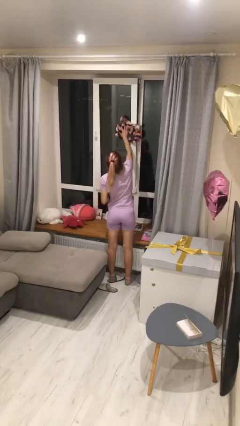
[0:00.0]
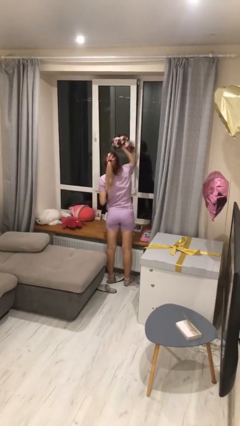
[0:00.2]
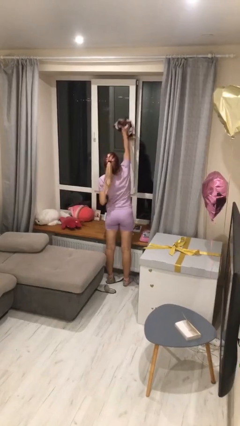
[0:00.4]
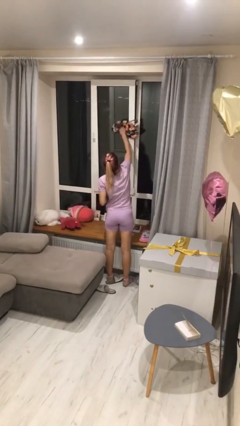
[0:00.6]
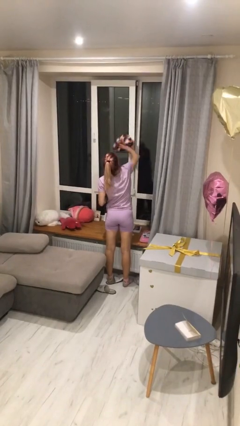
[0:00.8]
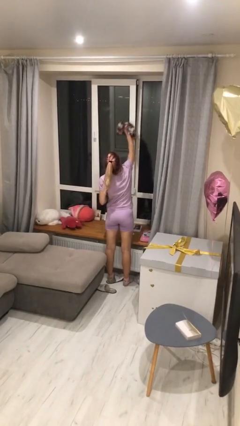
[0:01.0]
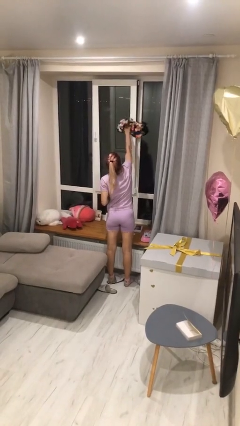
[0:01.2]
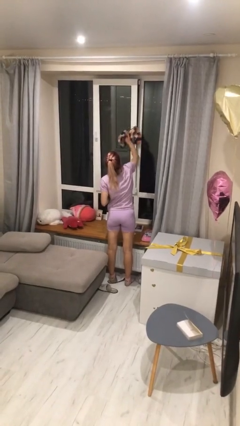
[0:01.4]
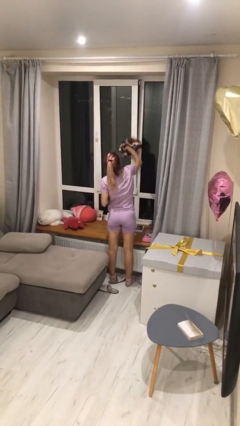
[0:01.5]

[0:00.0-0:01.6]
person washes window

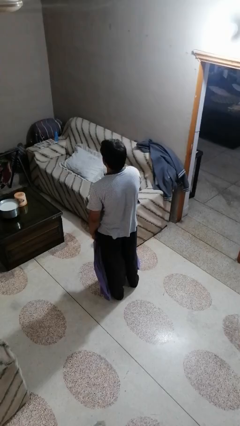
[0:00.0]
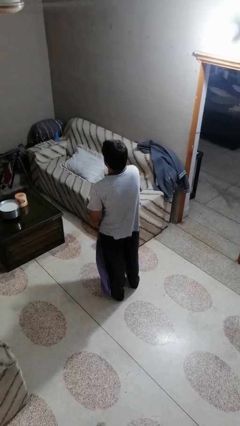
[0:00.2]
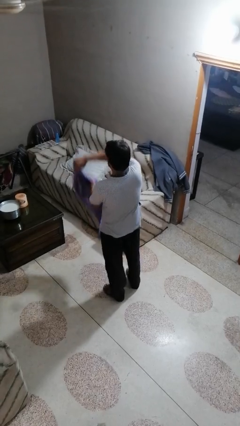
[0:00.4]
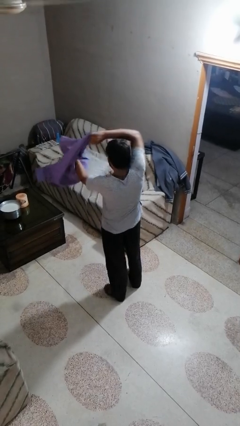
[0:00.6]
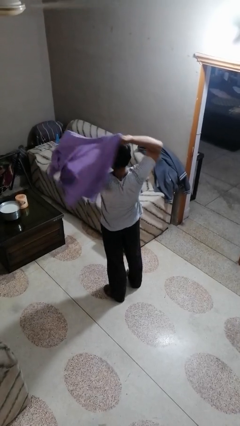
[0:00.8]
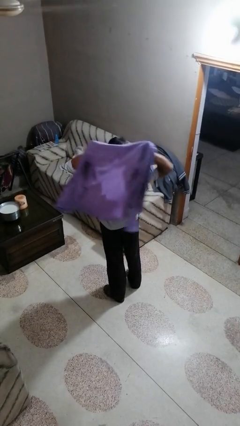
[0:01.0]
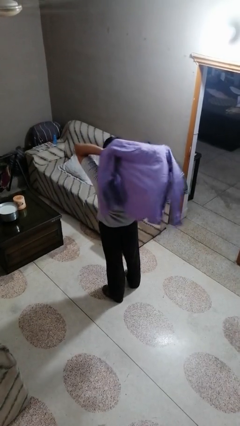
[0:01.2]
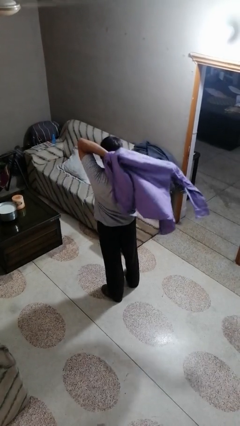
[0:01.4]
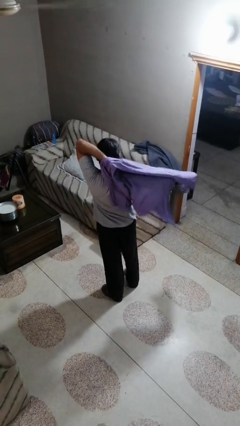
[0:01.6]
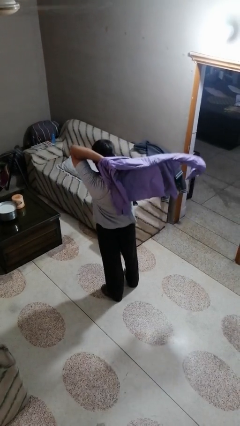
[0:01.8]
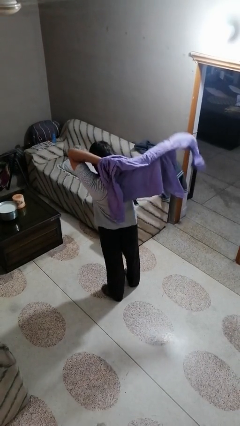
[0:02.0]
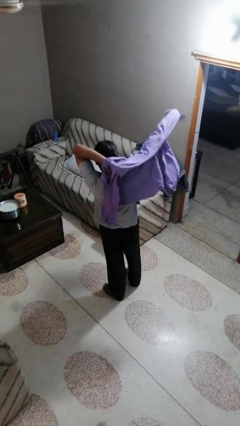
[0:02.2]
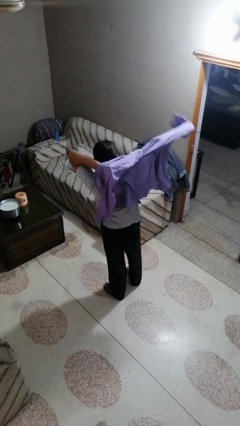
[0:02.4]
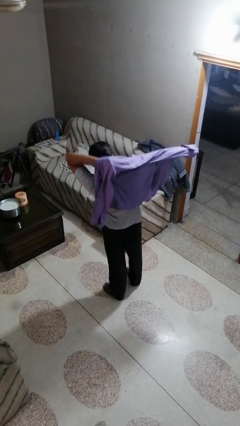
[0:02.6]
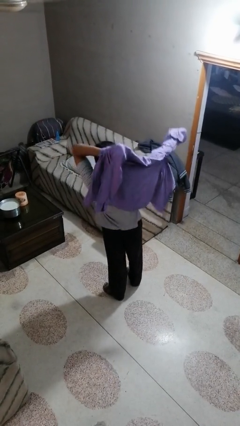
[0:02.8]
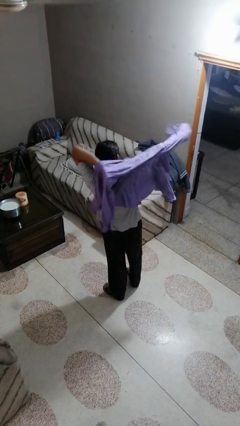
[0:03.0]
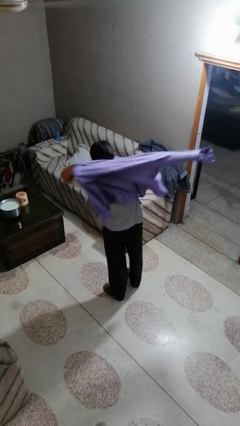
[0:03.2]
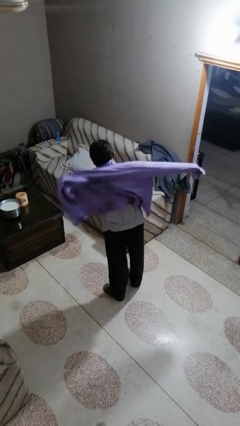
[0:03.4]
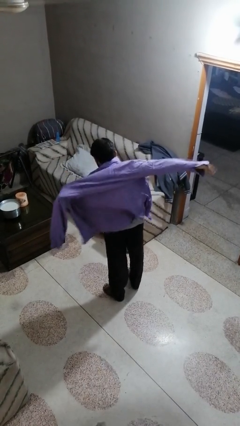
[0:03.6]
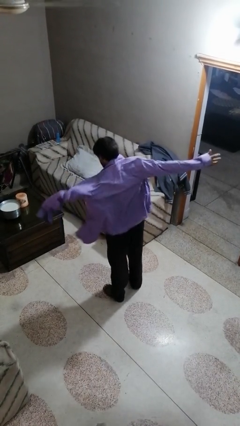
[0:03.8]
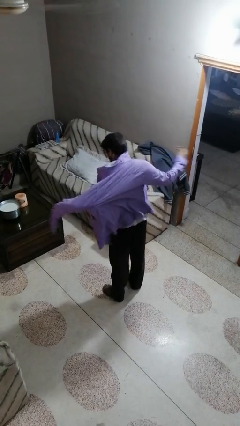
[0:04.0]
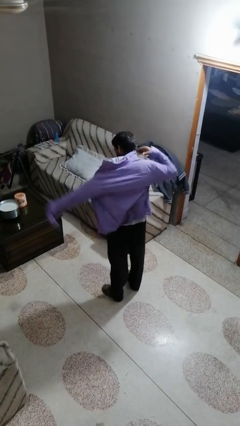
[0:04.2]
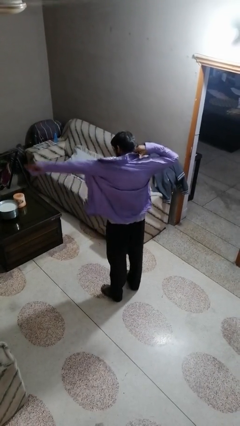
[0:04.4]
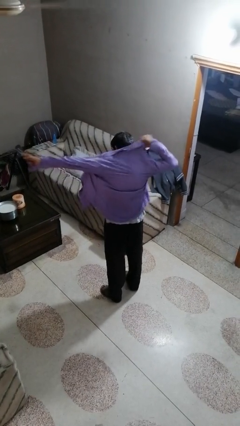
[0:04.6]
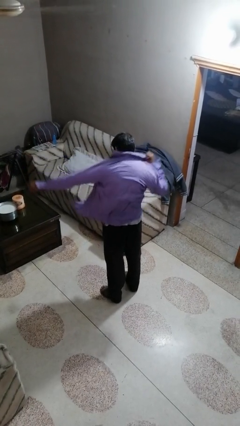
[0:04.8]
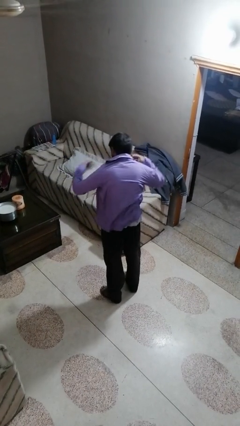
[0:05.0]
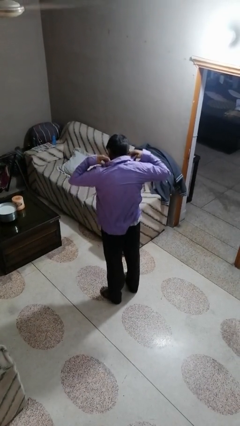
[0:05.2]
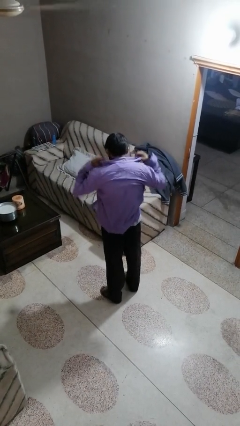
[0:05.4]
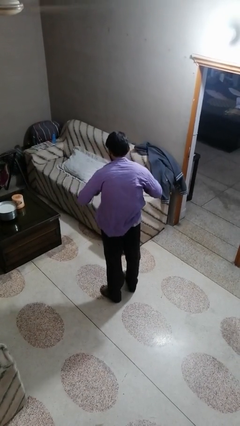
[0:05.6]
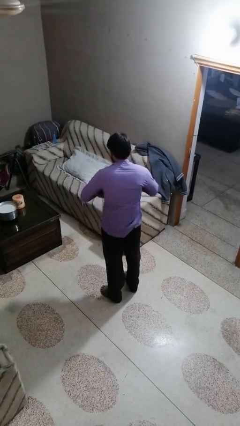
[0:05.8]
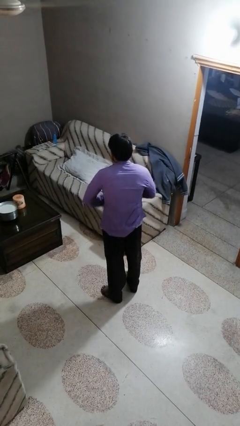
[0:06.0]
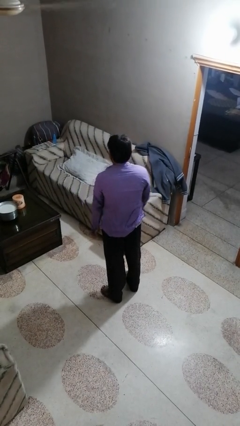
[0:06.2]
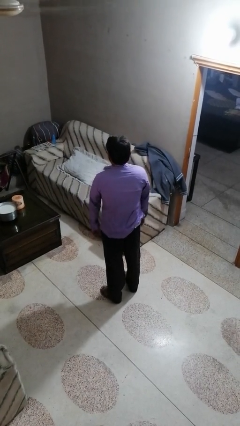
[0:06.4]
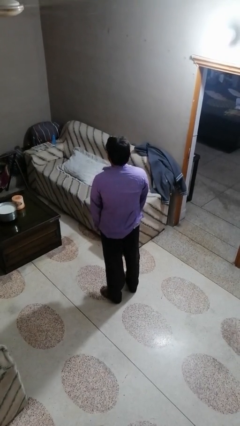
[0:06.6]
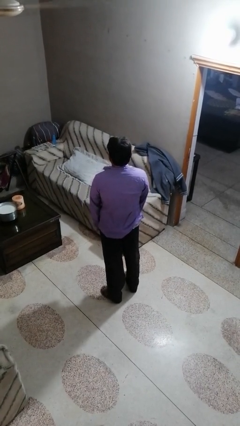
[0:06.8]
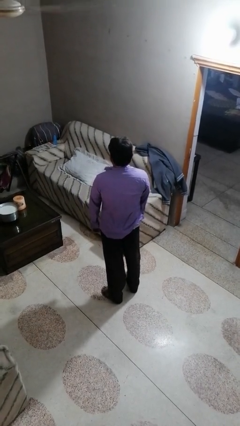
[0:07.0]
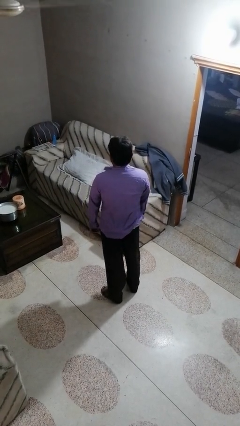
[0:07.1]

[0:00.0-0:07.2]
person puts on shirt

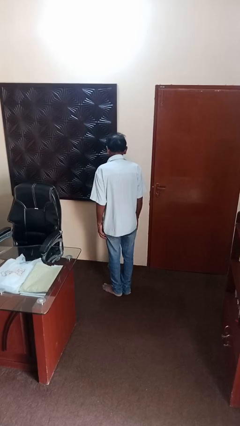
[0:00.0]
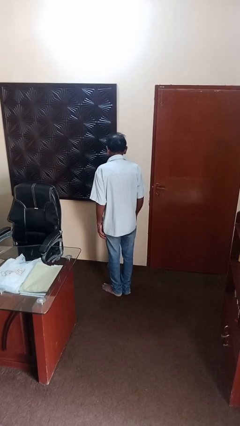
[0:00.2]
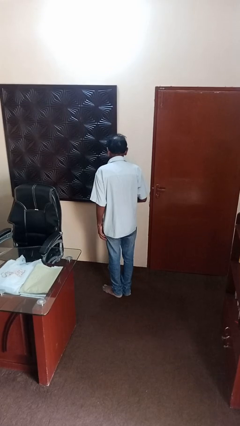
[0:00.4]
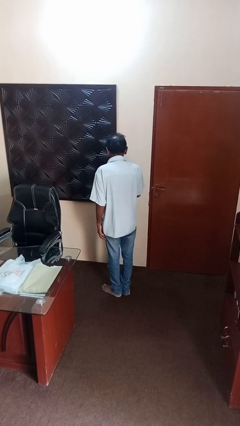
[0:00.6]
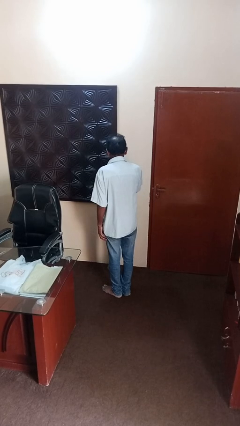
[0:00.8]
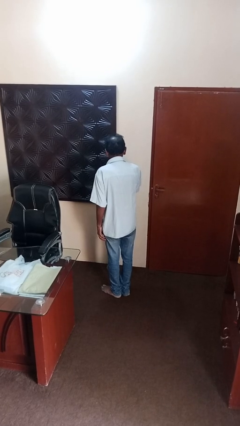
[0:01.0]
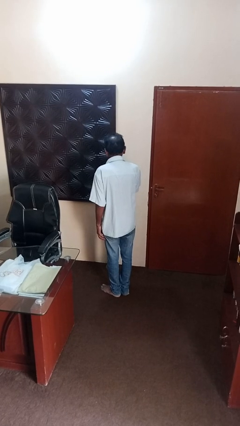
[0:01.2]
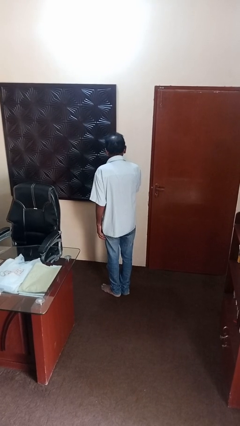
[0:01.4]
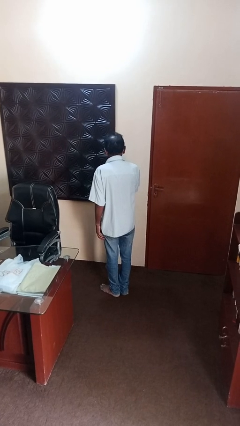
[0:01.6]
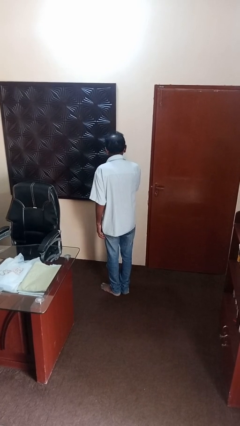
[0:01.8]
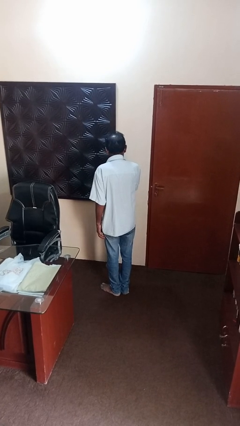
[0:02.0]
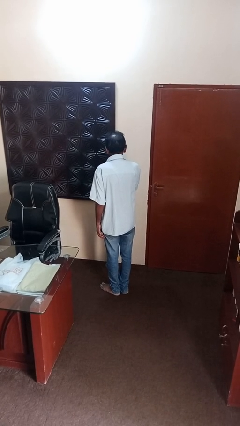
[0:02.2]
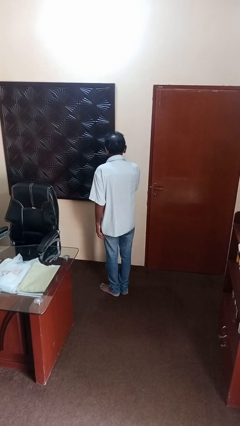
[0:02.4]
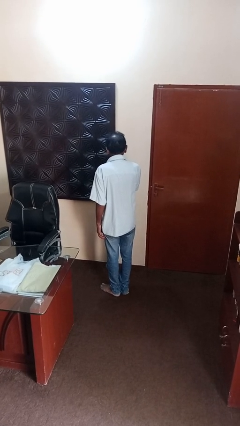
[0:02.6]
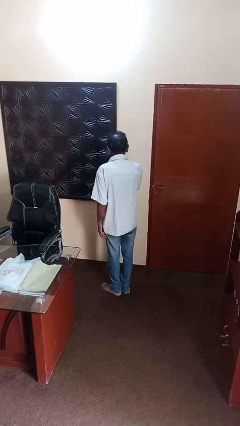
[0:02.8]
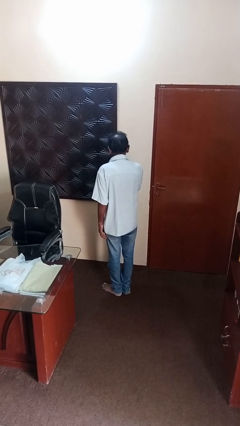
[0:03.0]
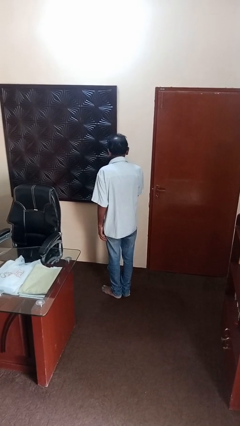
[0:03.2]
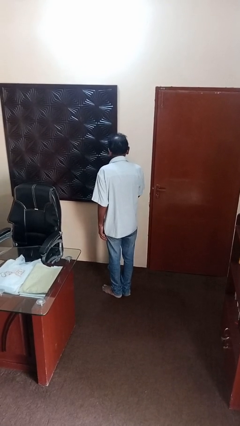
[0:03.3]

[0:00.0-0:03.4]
person licks fingers

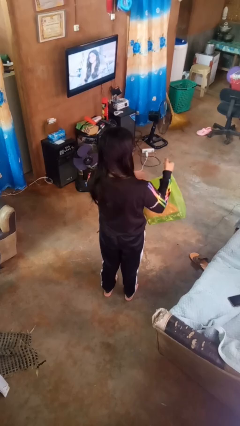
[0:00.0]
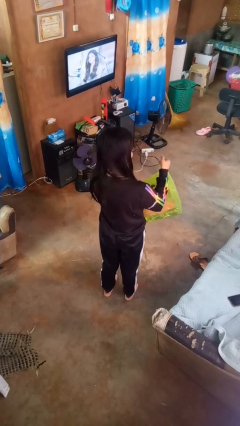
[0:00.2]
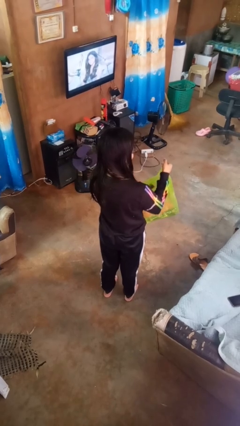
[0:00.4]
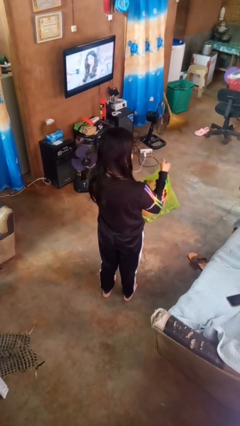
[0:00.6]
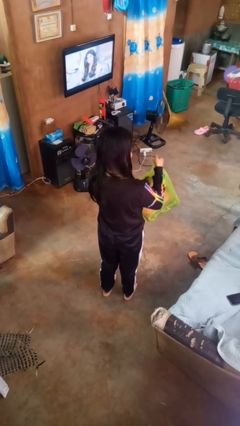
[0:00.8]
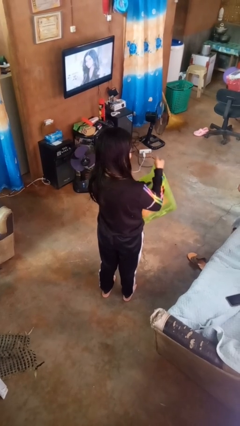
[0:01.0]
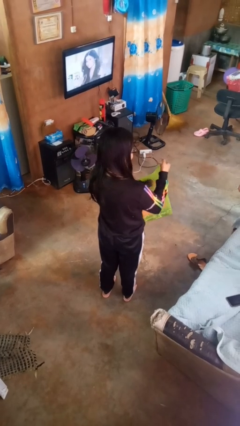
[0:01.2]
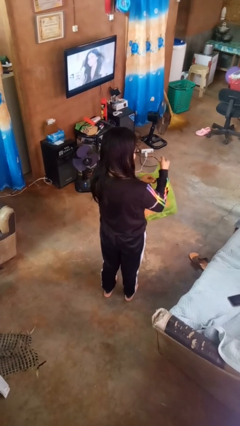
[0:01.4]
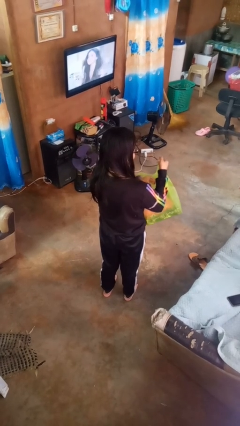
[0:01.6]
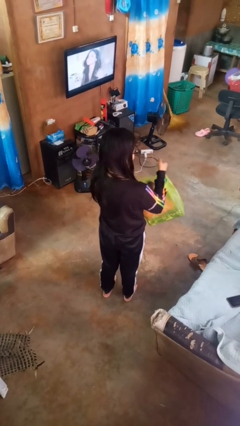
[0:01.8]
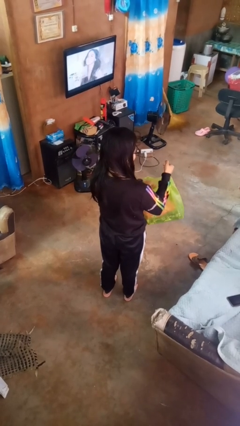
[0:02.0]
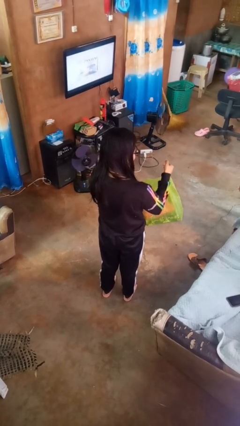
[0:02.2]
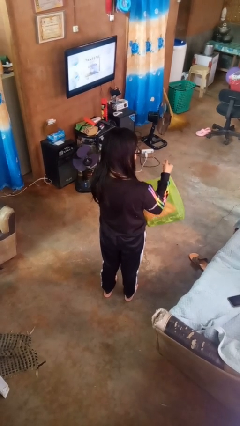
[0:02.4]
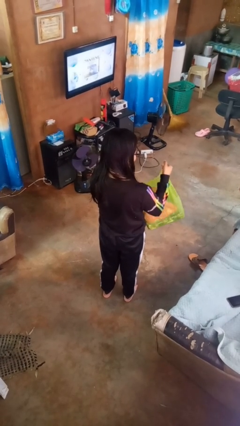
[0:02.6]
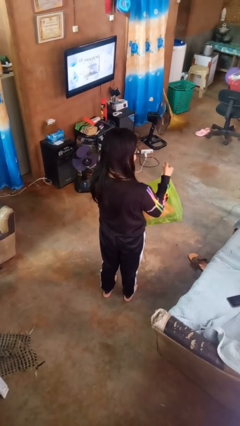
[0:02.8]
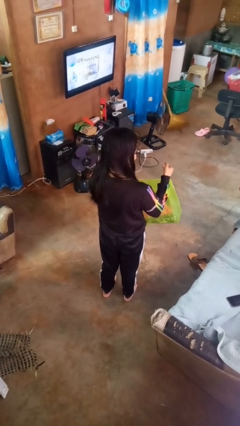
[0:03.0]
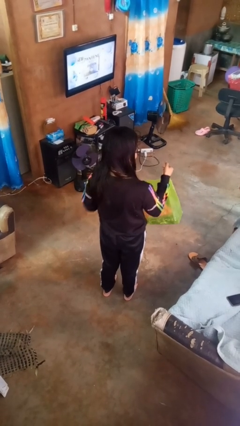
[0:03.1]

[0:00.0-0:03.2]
person searches in bag

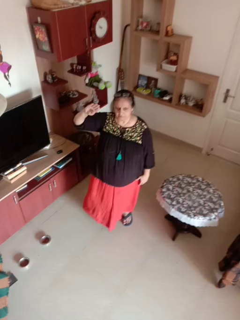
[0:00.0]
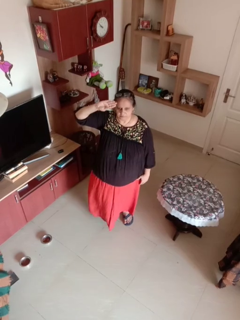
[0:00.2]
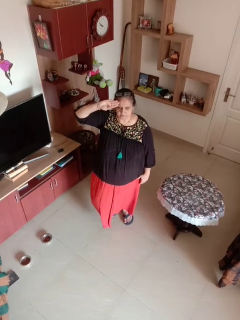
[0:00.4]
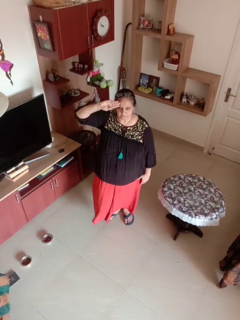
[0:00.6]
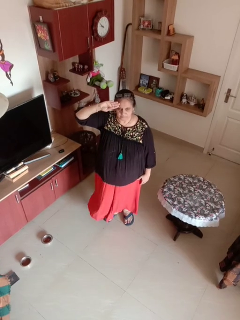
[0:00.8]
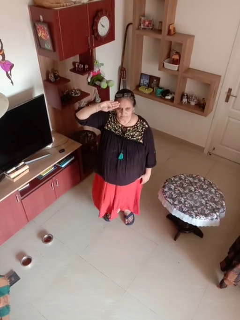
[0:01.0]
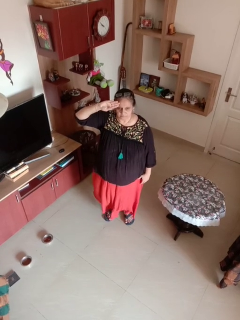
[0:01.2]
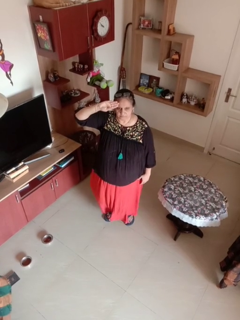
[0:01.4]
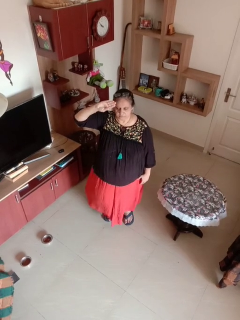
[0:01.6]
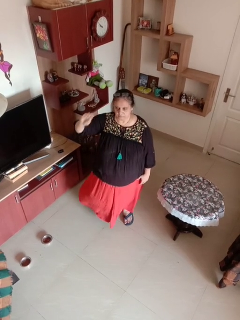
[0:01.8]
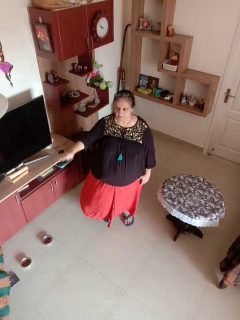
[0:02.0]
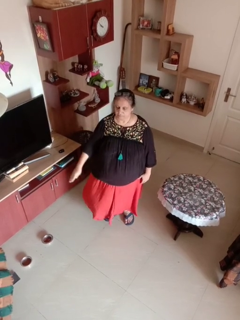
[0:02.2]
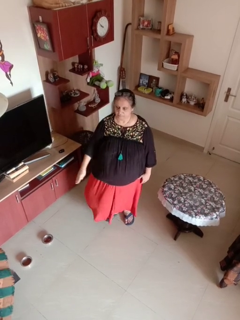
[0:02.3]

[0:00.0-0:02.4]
person salutes

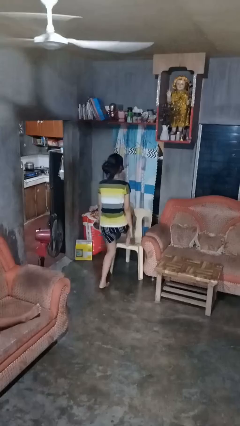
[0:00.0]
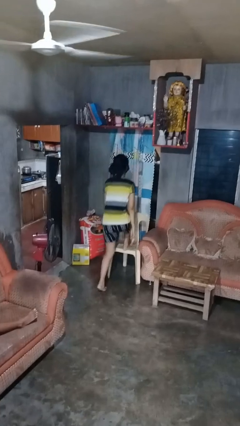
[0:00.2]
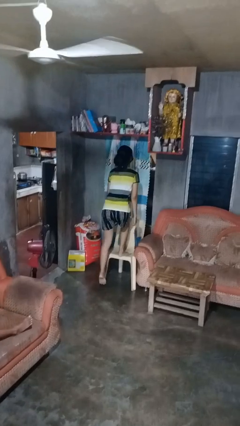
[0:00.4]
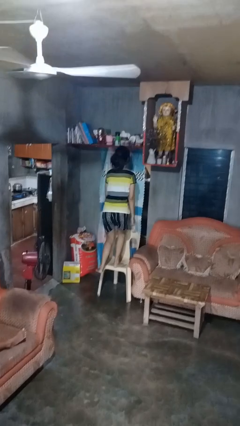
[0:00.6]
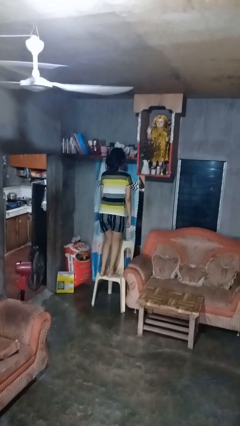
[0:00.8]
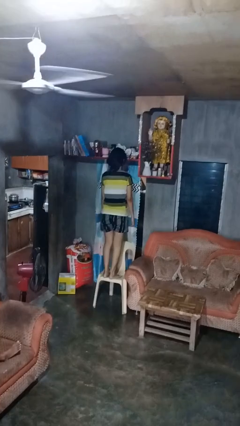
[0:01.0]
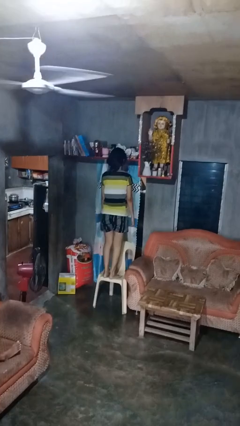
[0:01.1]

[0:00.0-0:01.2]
person climbs on chair
